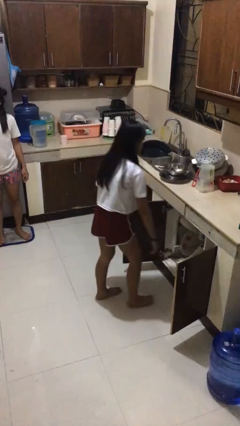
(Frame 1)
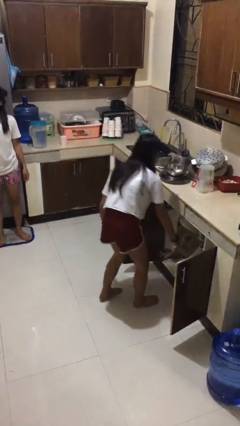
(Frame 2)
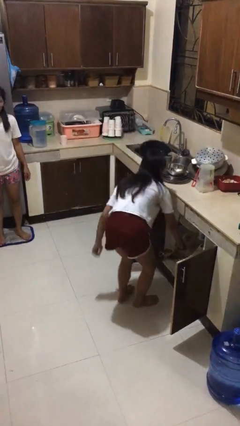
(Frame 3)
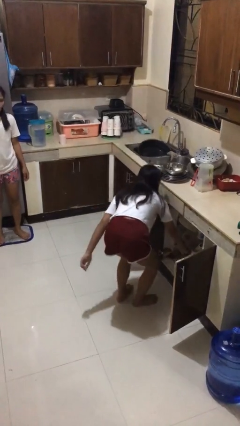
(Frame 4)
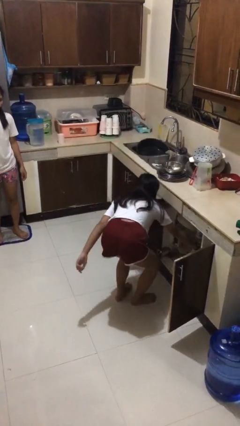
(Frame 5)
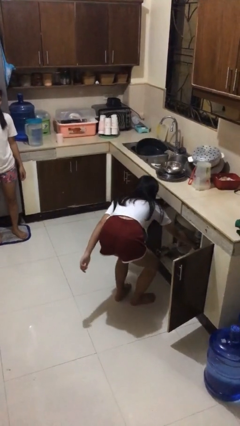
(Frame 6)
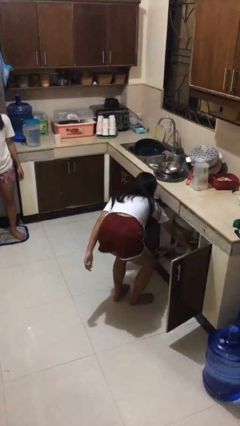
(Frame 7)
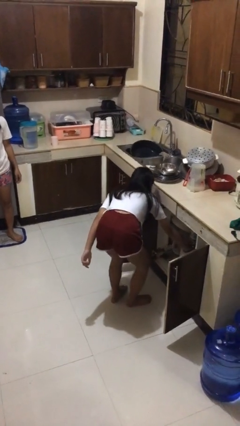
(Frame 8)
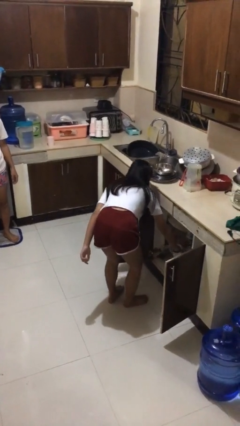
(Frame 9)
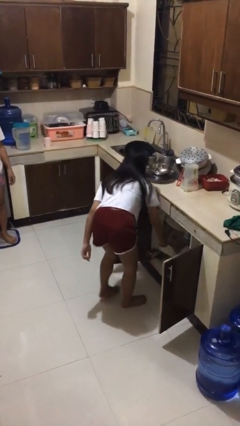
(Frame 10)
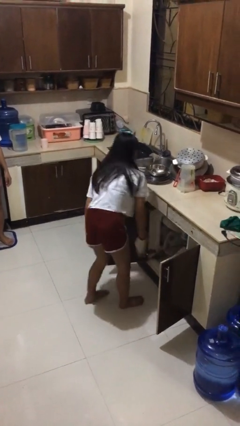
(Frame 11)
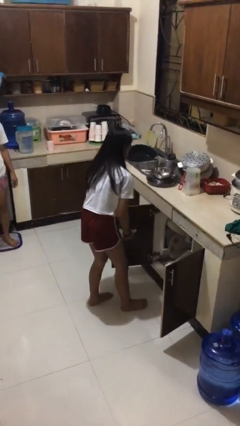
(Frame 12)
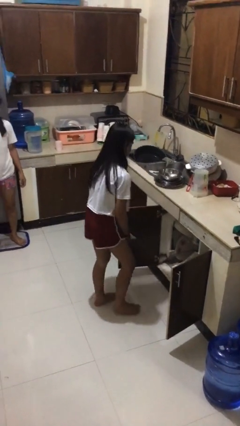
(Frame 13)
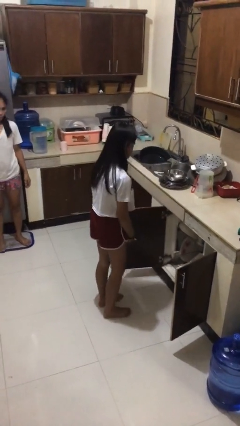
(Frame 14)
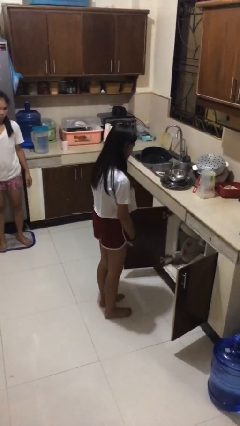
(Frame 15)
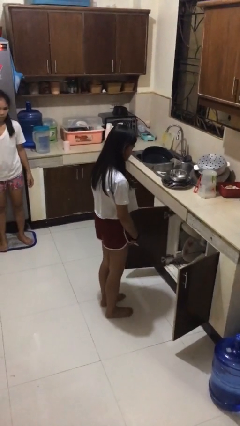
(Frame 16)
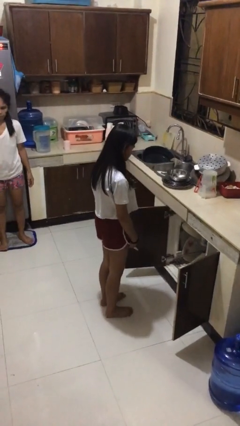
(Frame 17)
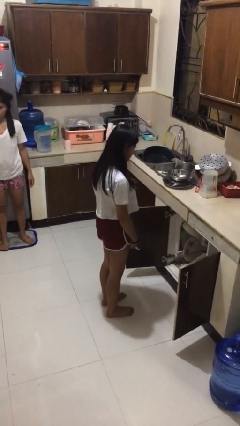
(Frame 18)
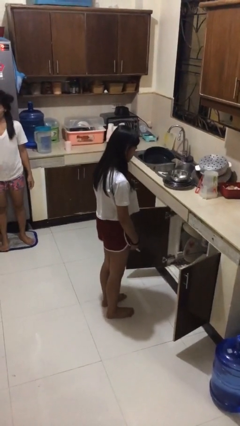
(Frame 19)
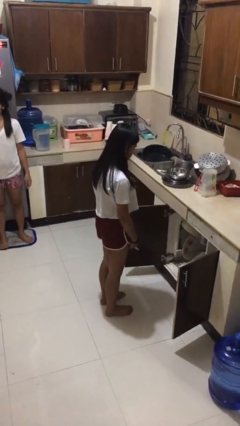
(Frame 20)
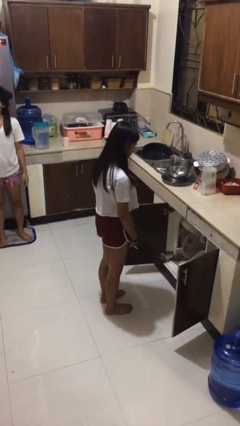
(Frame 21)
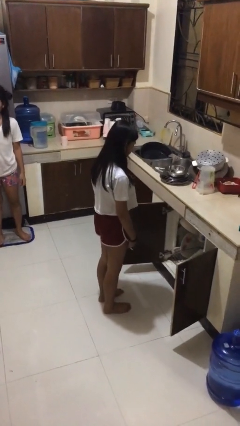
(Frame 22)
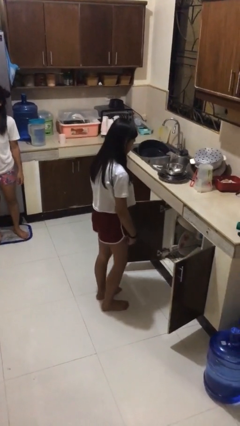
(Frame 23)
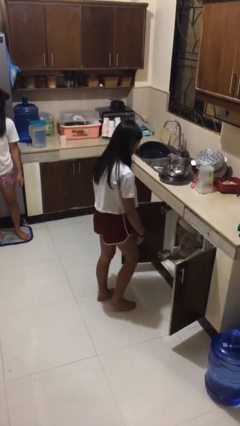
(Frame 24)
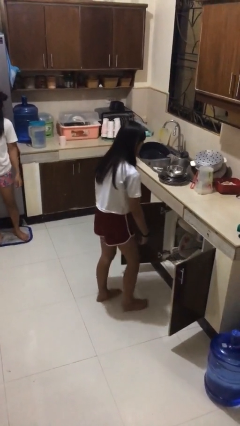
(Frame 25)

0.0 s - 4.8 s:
person unloads dishwasher

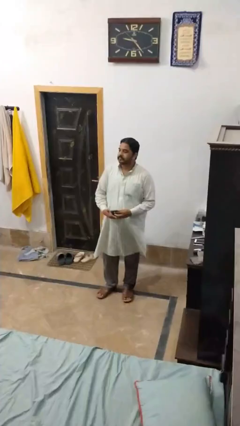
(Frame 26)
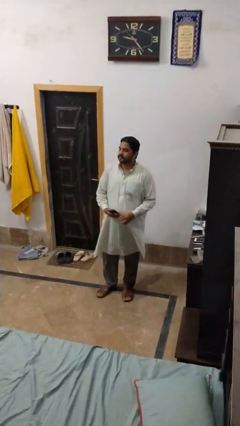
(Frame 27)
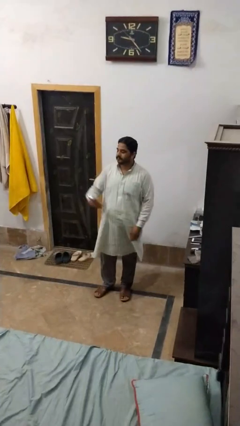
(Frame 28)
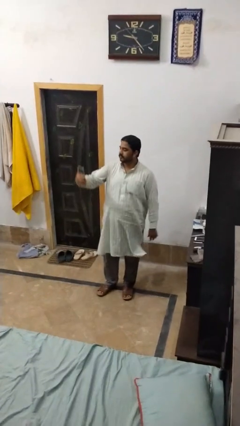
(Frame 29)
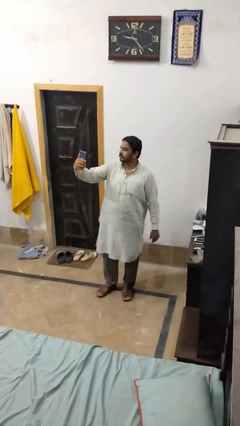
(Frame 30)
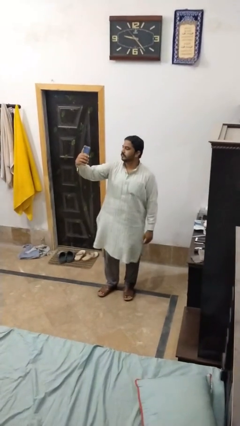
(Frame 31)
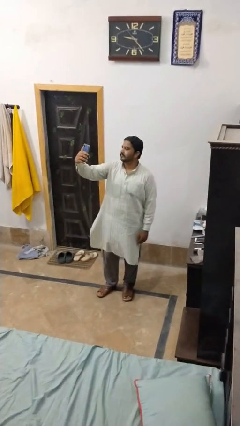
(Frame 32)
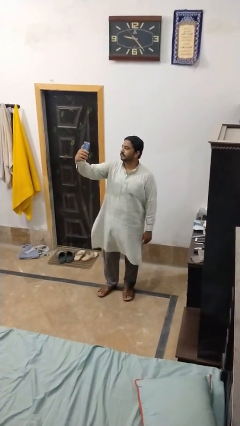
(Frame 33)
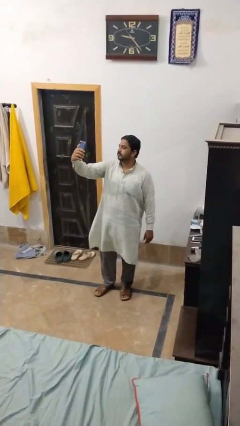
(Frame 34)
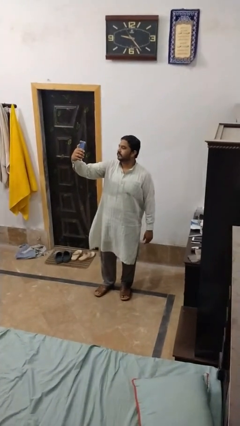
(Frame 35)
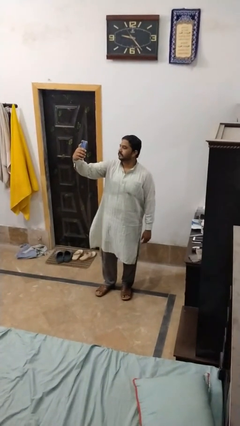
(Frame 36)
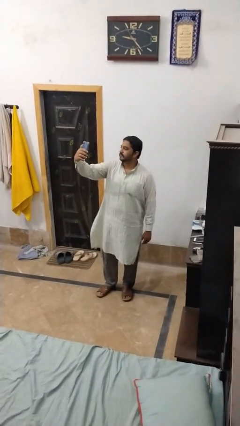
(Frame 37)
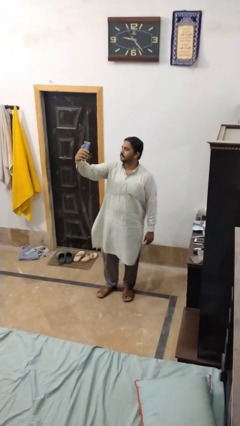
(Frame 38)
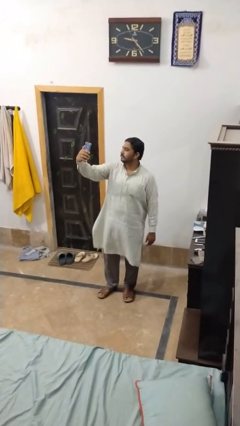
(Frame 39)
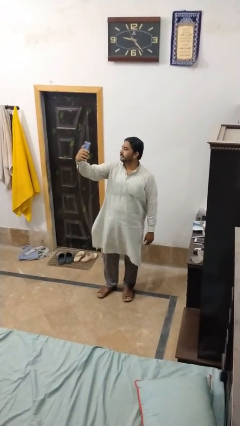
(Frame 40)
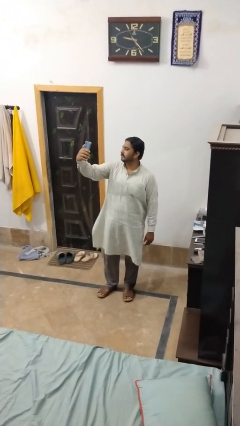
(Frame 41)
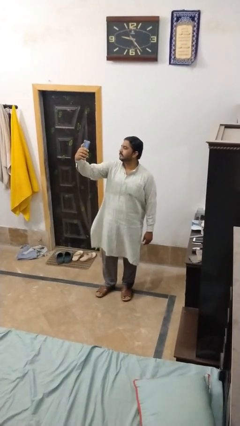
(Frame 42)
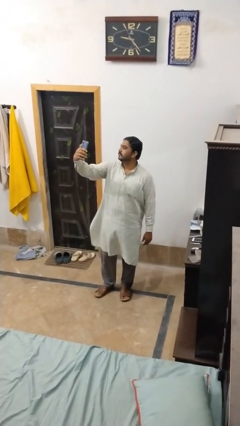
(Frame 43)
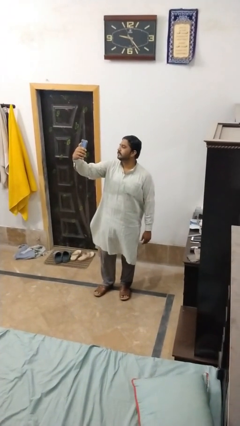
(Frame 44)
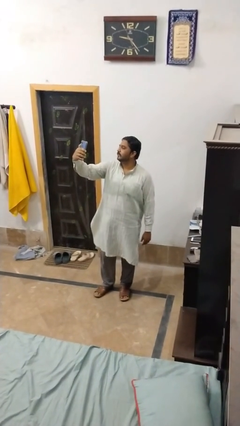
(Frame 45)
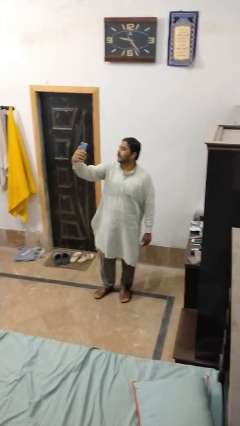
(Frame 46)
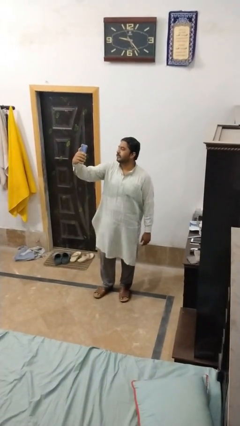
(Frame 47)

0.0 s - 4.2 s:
person takes selfie

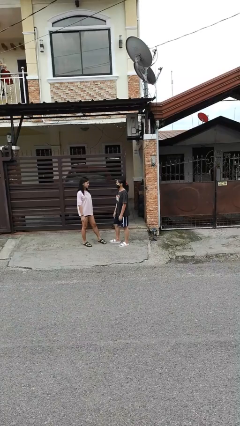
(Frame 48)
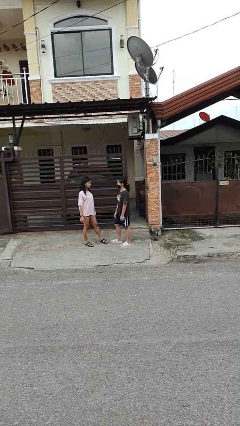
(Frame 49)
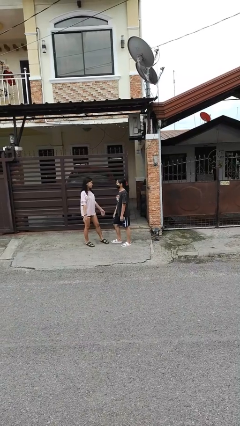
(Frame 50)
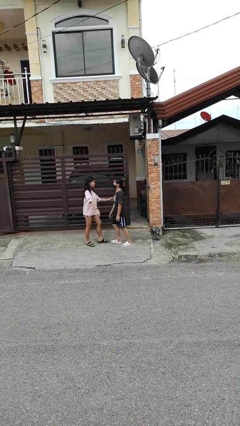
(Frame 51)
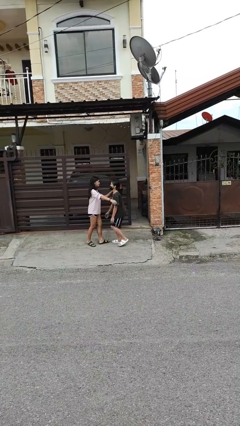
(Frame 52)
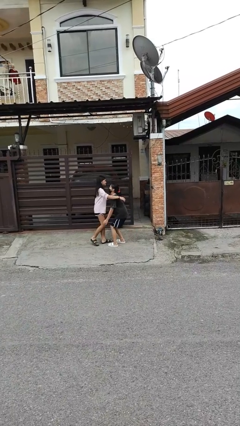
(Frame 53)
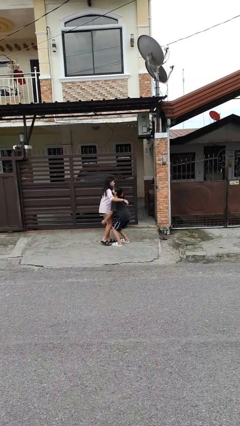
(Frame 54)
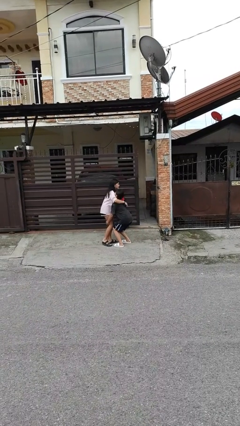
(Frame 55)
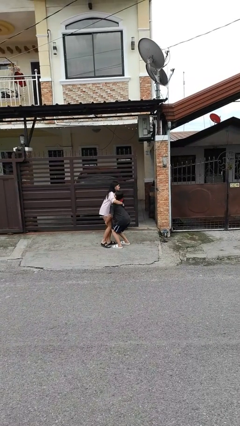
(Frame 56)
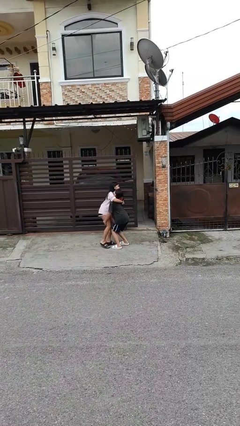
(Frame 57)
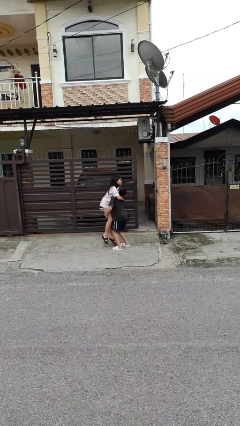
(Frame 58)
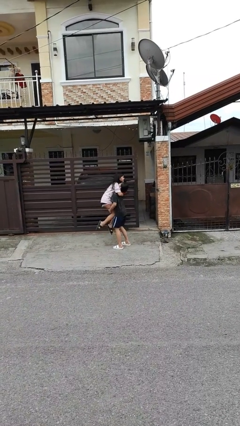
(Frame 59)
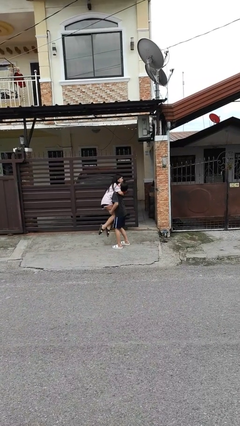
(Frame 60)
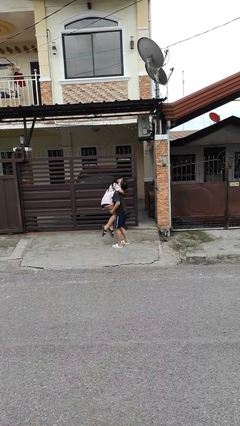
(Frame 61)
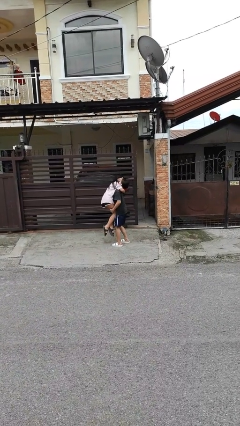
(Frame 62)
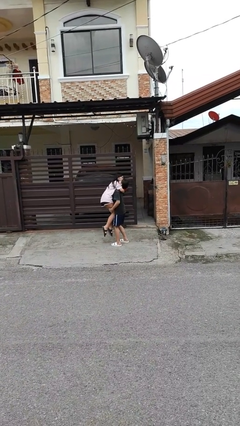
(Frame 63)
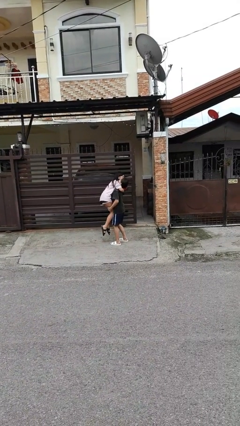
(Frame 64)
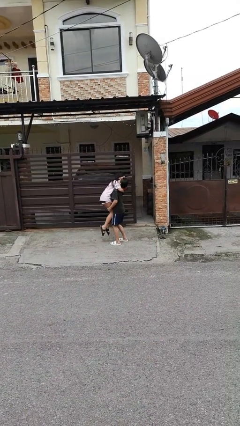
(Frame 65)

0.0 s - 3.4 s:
person picks up person

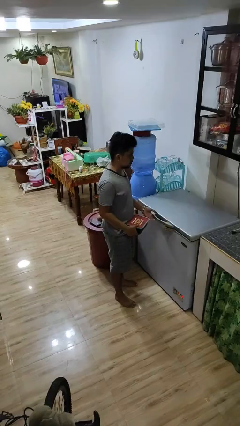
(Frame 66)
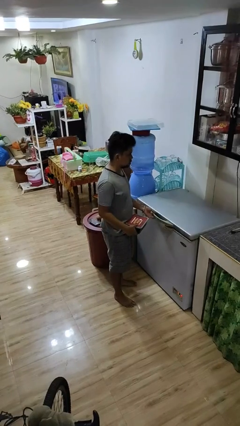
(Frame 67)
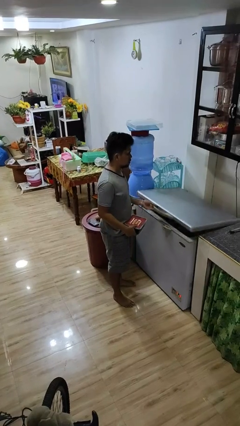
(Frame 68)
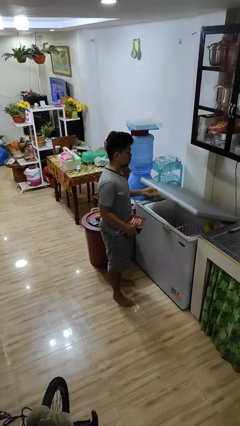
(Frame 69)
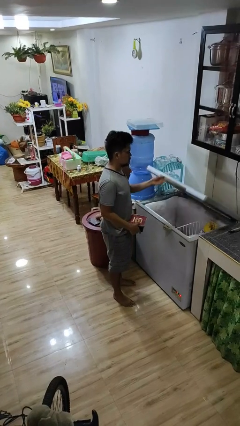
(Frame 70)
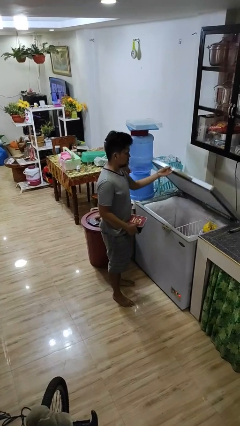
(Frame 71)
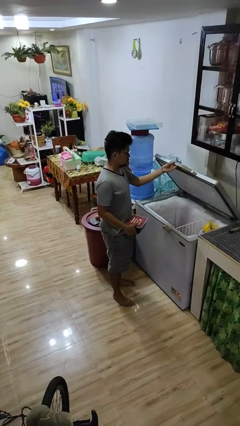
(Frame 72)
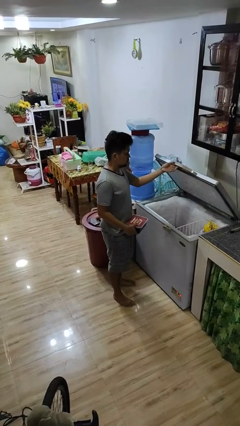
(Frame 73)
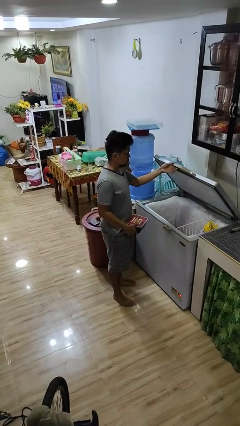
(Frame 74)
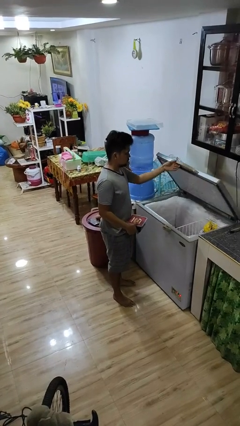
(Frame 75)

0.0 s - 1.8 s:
person opens refrigerator

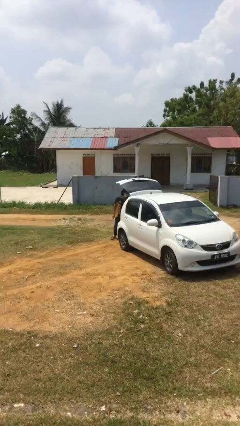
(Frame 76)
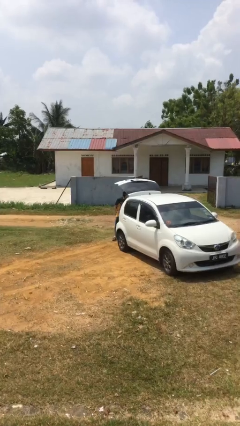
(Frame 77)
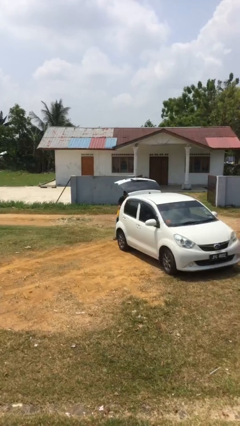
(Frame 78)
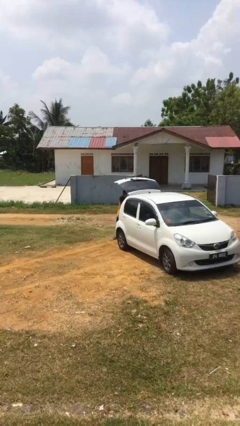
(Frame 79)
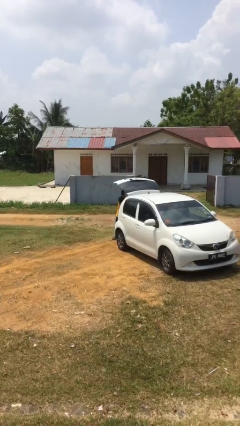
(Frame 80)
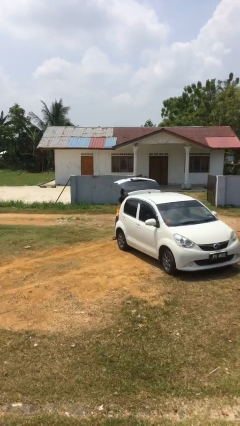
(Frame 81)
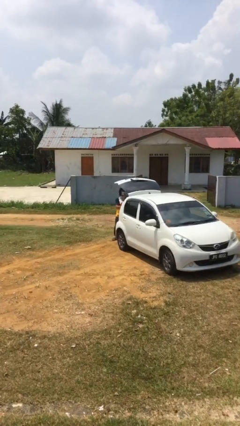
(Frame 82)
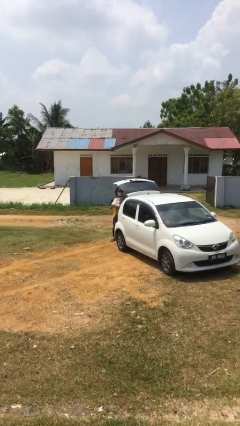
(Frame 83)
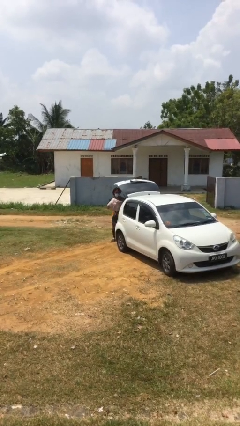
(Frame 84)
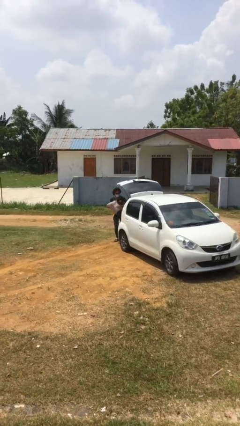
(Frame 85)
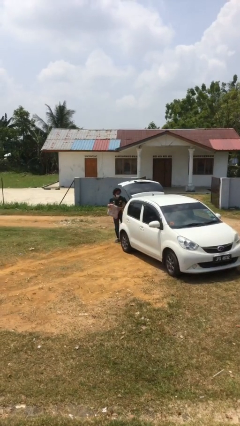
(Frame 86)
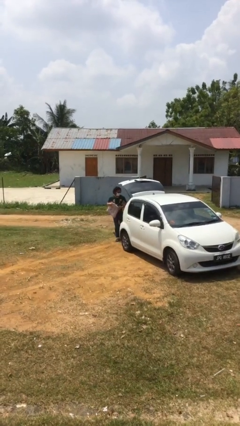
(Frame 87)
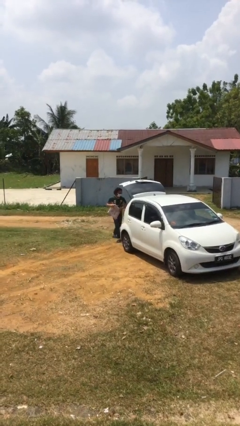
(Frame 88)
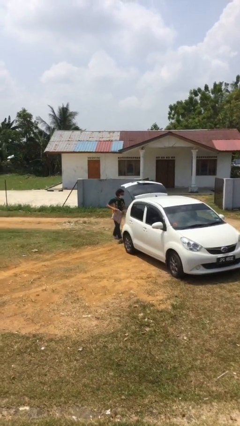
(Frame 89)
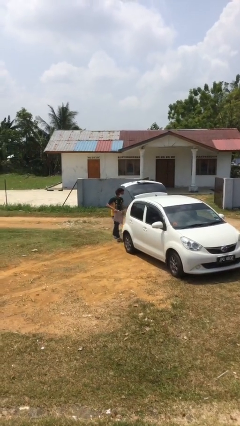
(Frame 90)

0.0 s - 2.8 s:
person unloads car

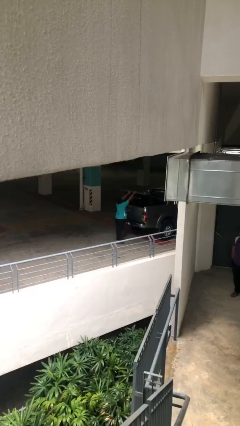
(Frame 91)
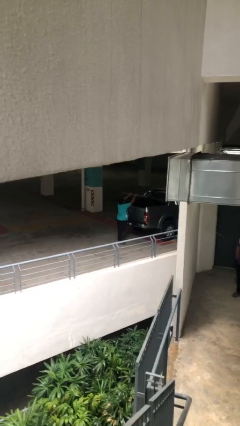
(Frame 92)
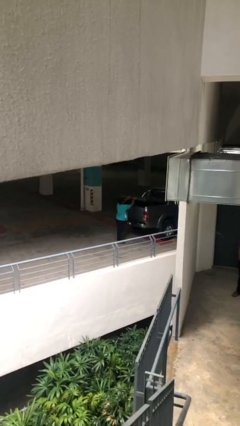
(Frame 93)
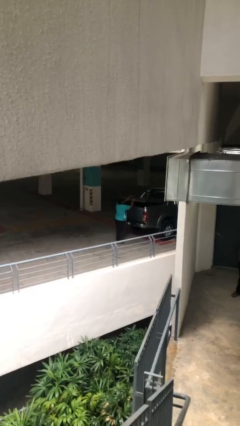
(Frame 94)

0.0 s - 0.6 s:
person closes car trunk
